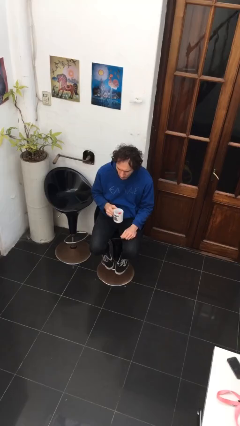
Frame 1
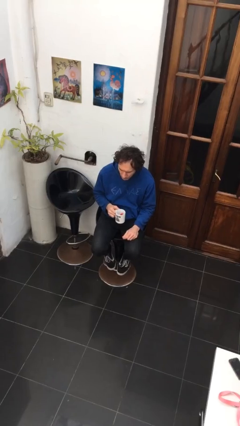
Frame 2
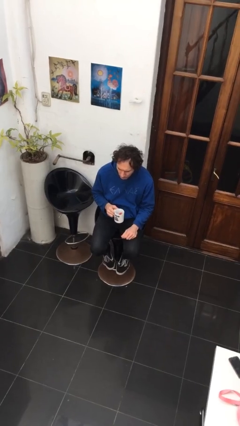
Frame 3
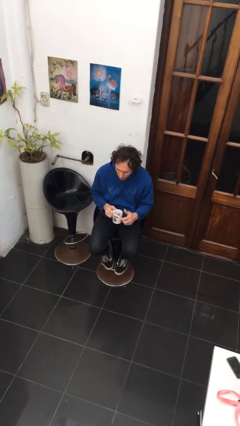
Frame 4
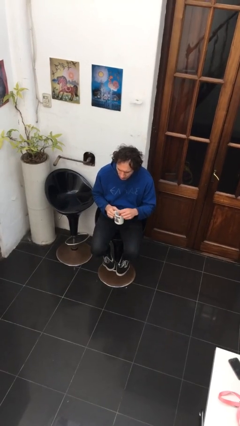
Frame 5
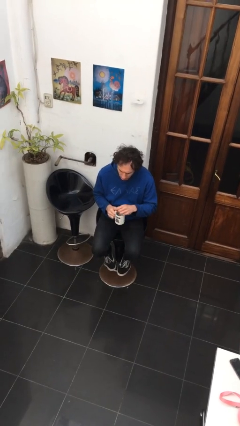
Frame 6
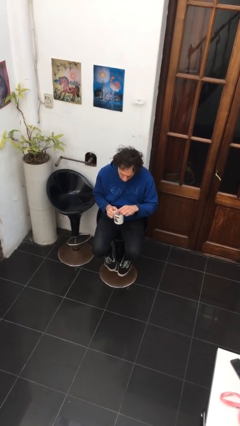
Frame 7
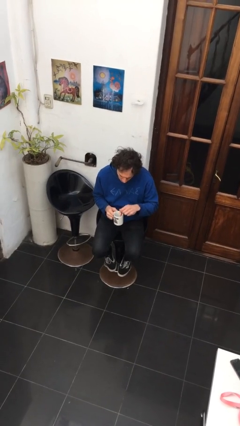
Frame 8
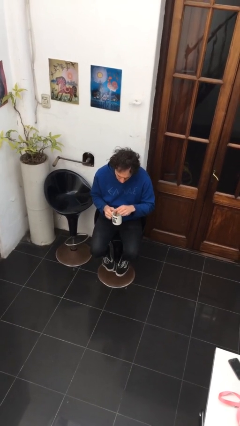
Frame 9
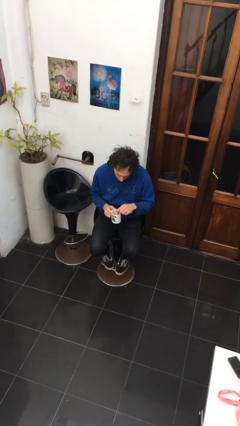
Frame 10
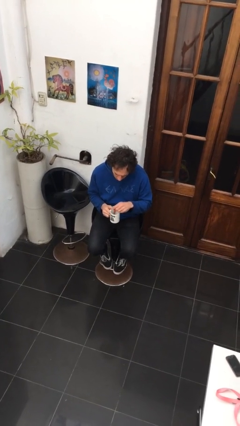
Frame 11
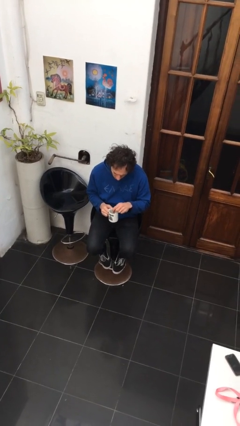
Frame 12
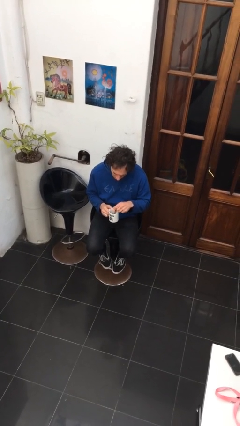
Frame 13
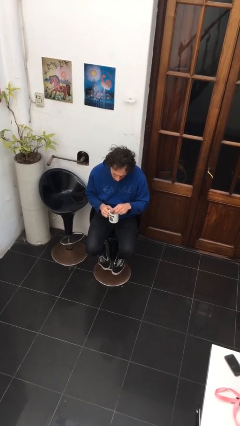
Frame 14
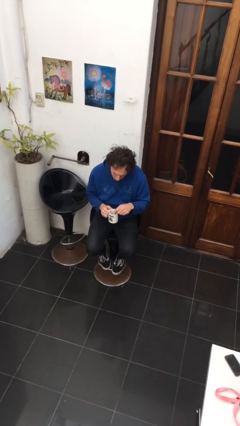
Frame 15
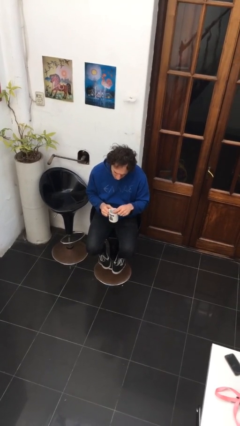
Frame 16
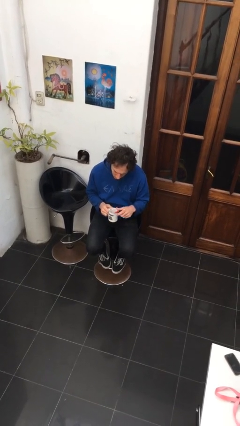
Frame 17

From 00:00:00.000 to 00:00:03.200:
person stirs mug

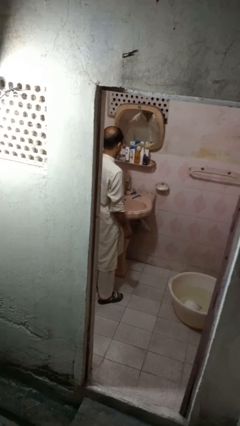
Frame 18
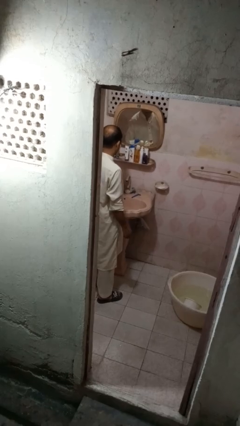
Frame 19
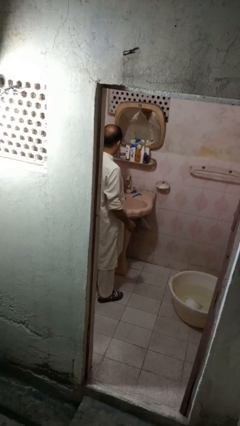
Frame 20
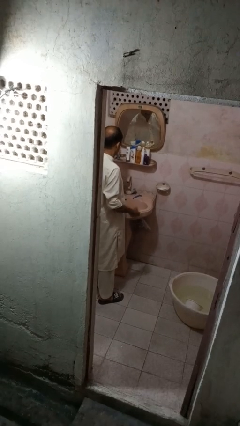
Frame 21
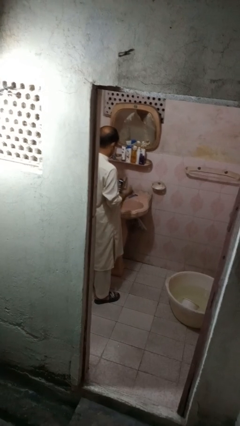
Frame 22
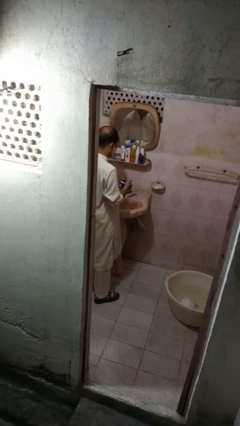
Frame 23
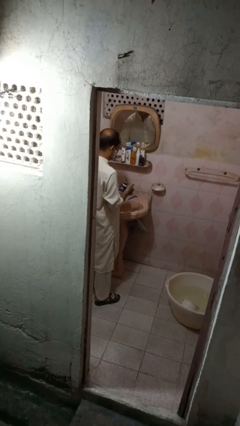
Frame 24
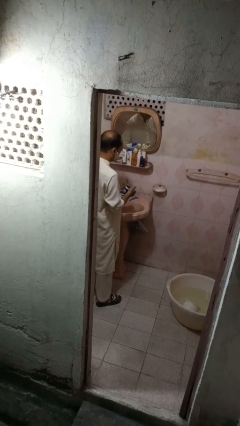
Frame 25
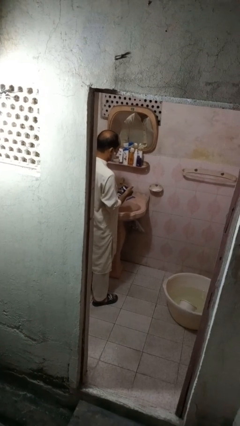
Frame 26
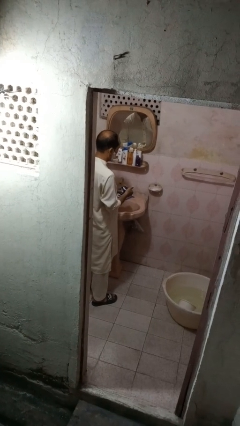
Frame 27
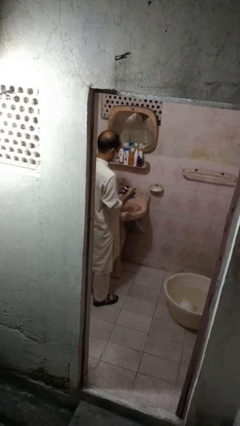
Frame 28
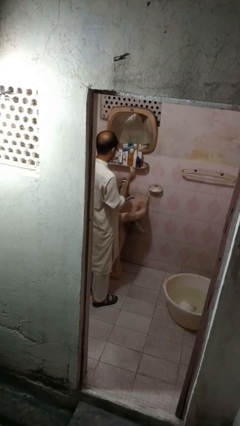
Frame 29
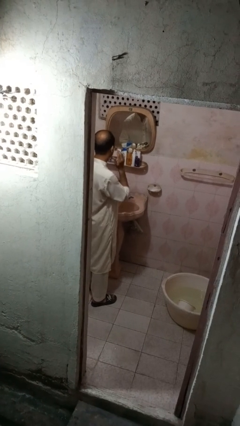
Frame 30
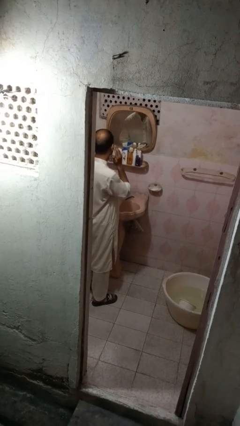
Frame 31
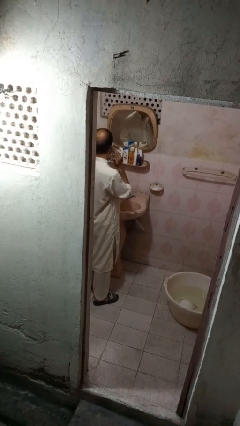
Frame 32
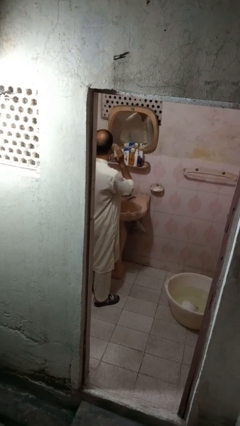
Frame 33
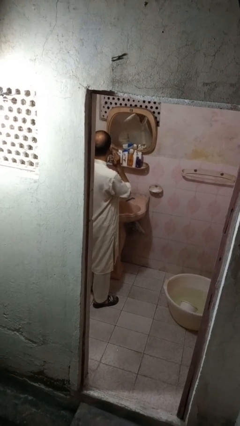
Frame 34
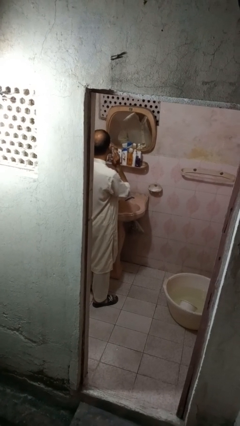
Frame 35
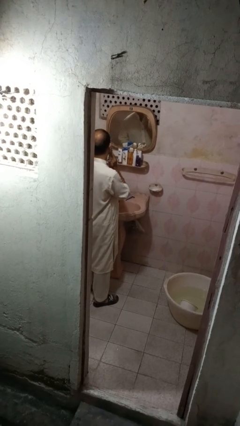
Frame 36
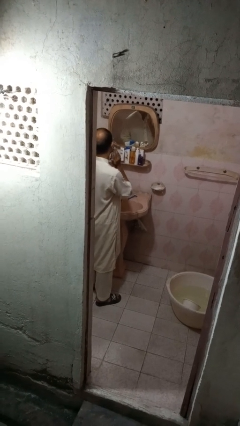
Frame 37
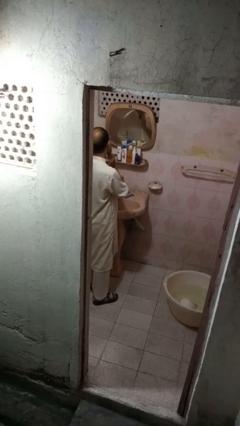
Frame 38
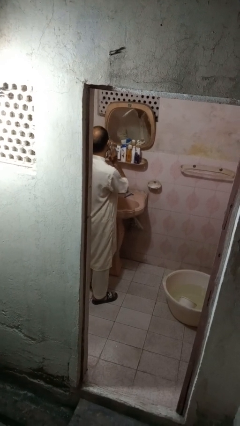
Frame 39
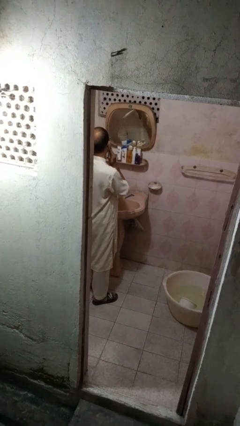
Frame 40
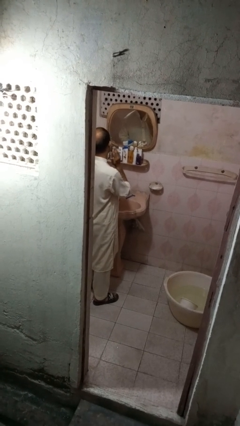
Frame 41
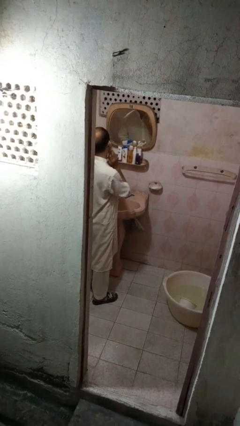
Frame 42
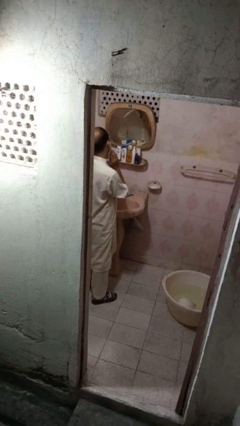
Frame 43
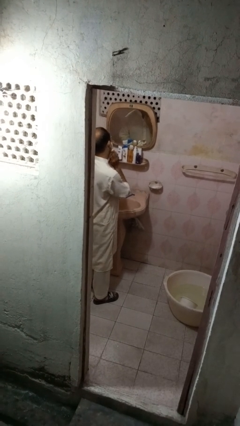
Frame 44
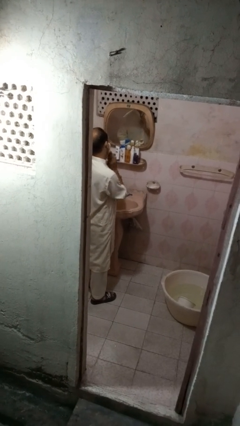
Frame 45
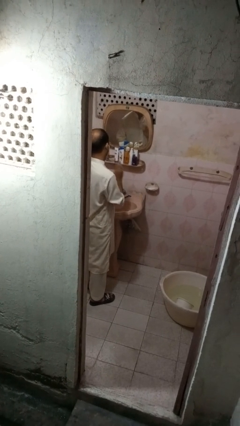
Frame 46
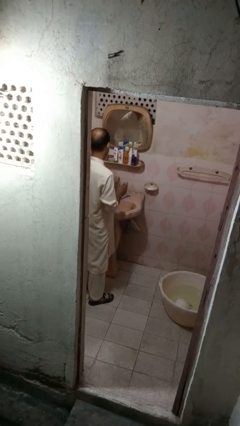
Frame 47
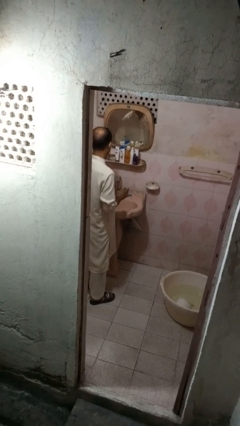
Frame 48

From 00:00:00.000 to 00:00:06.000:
person applies shaving cream

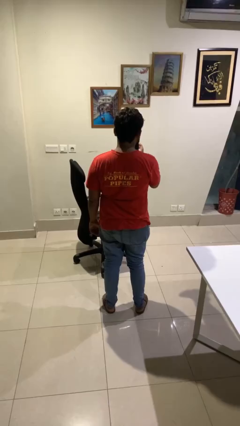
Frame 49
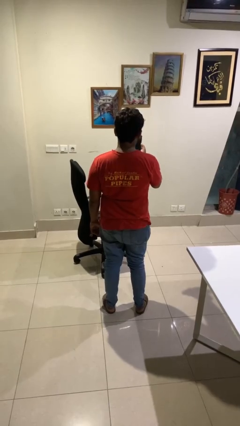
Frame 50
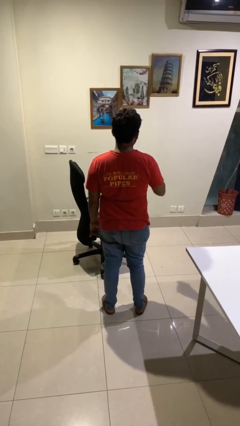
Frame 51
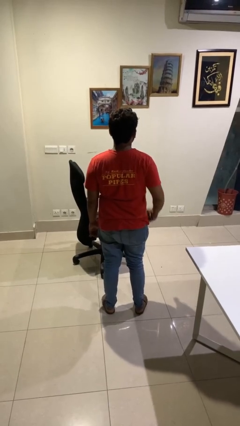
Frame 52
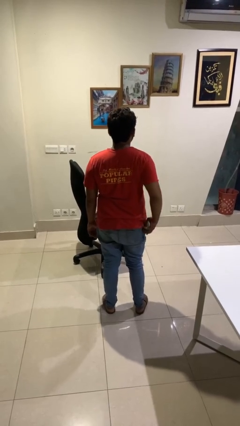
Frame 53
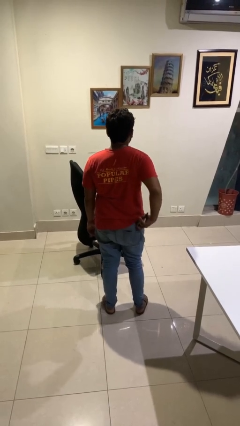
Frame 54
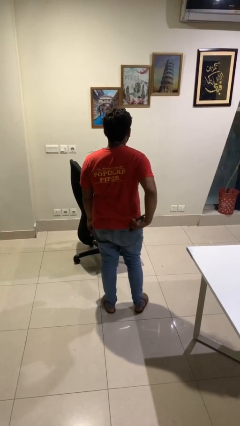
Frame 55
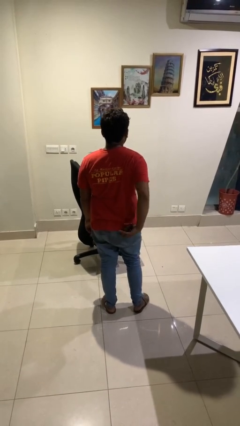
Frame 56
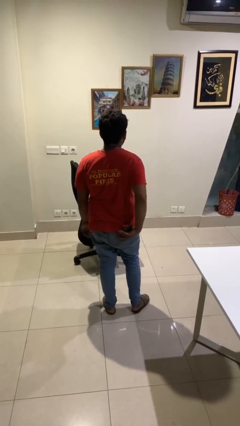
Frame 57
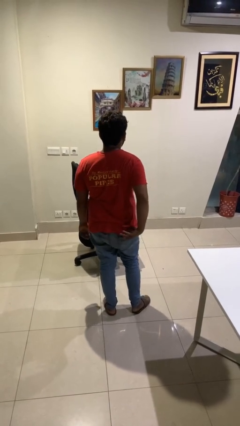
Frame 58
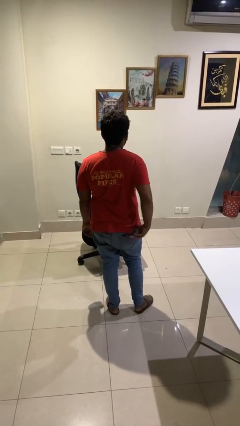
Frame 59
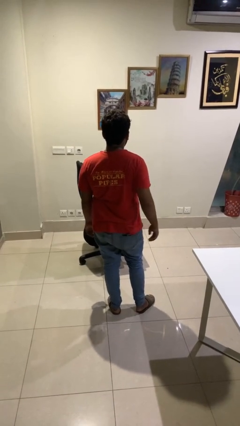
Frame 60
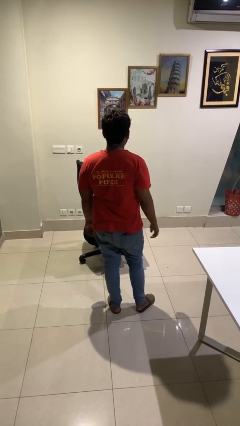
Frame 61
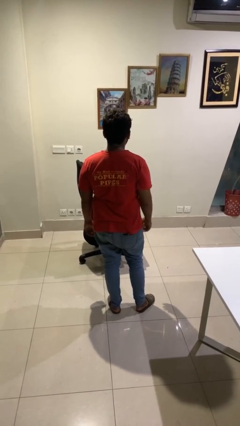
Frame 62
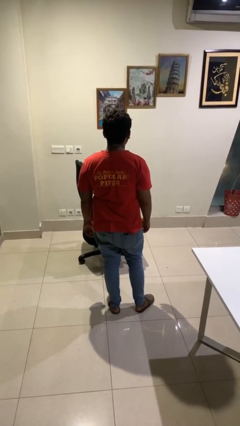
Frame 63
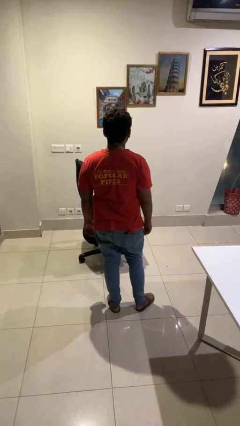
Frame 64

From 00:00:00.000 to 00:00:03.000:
person puts phone into pocket

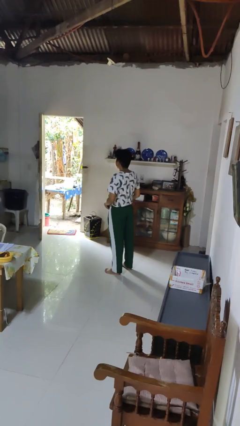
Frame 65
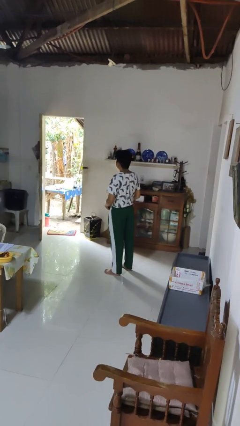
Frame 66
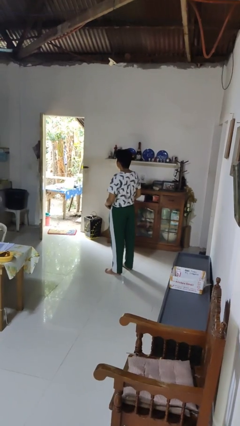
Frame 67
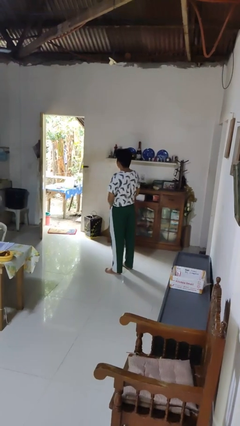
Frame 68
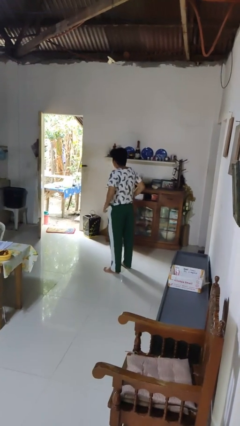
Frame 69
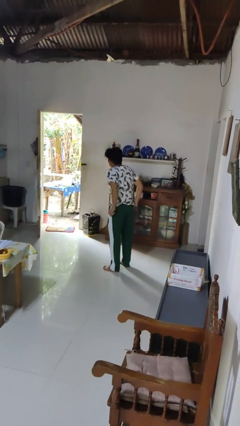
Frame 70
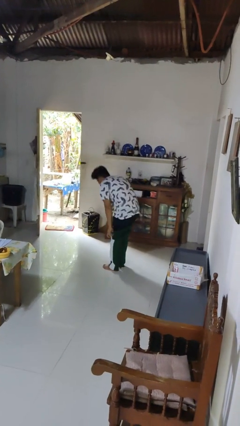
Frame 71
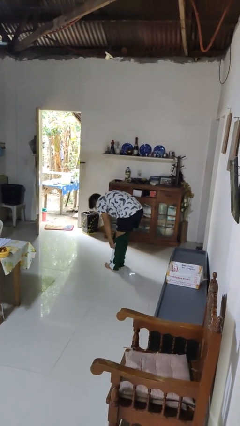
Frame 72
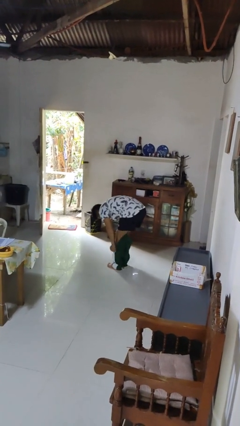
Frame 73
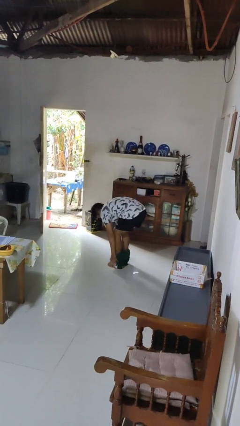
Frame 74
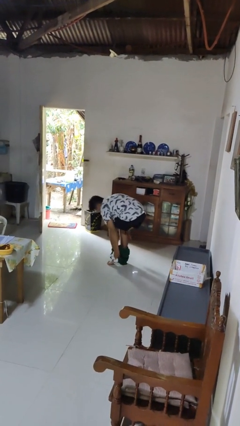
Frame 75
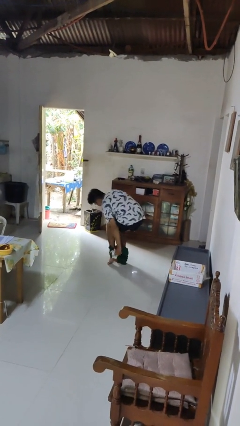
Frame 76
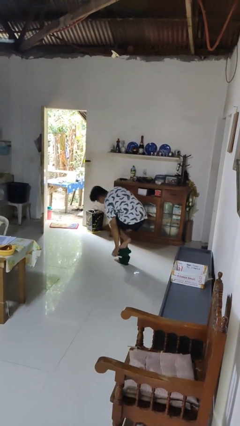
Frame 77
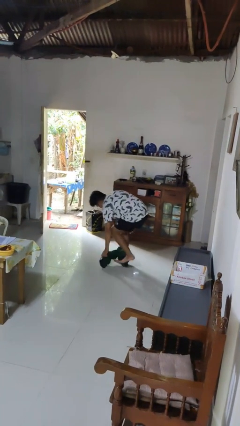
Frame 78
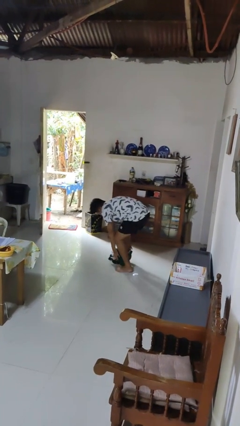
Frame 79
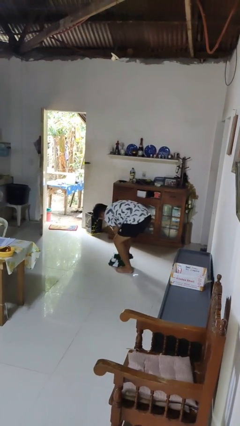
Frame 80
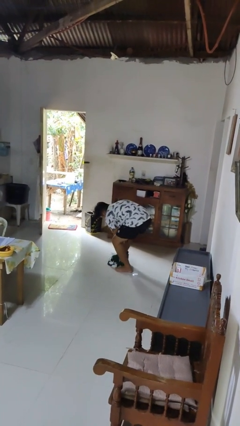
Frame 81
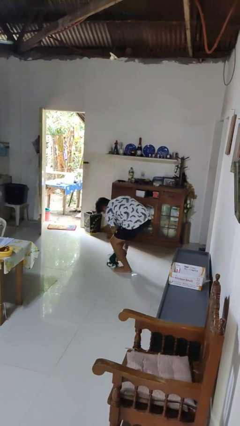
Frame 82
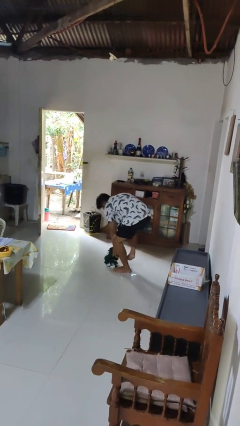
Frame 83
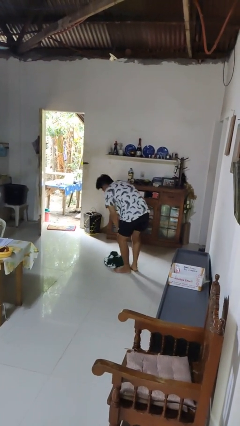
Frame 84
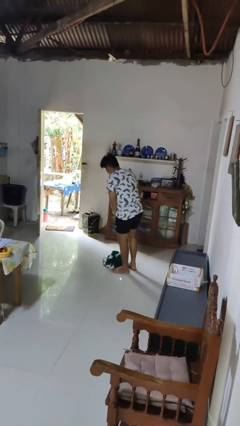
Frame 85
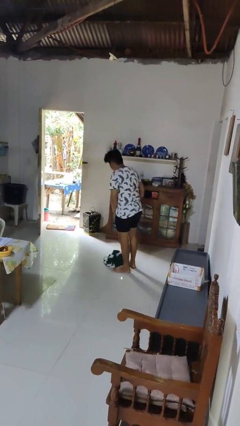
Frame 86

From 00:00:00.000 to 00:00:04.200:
person takes off pants

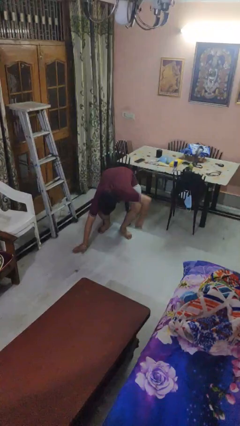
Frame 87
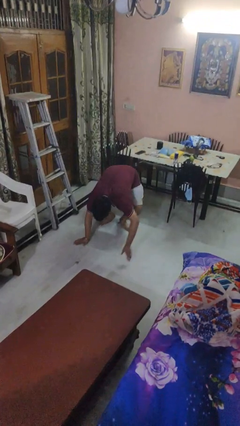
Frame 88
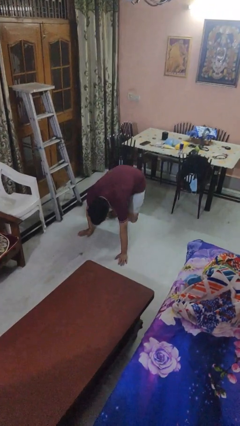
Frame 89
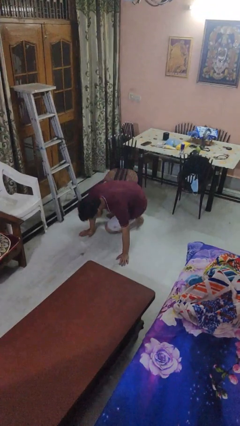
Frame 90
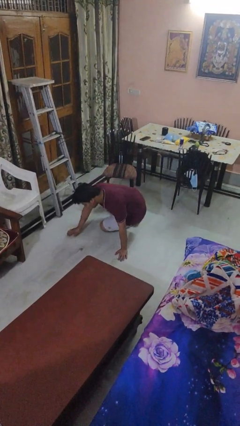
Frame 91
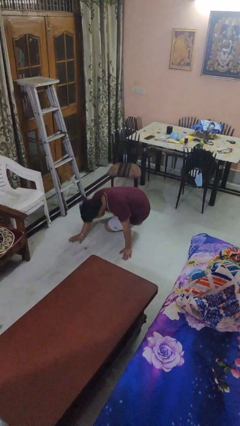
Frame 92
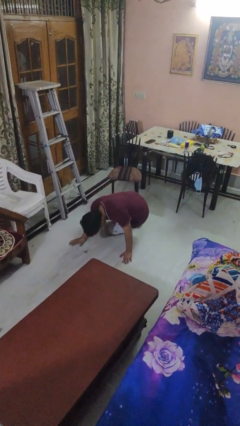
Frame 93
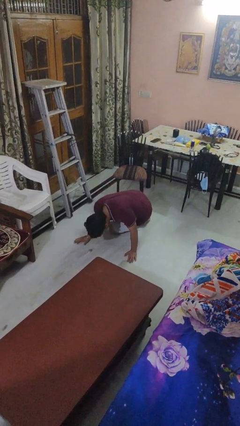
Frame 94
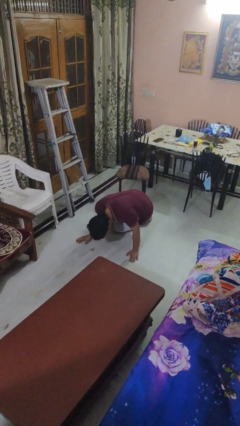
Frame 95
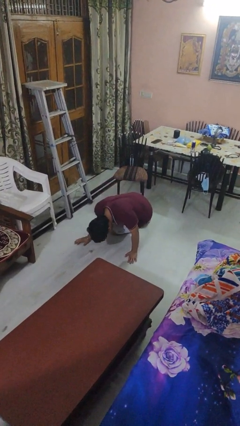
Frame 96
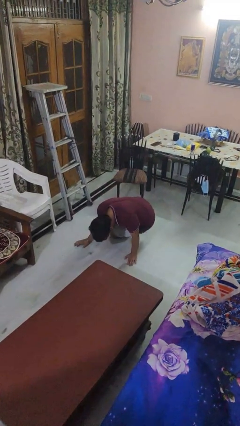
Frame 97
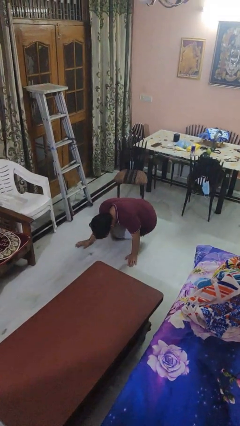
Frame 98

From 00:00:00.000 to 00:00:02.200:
person falls while standing
